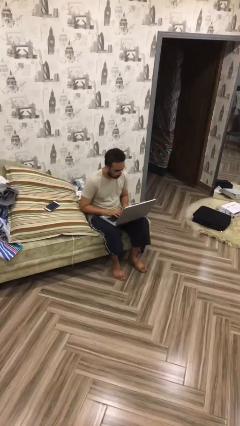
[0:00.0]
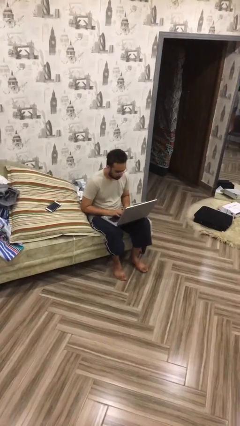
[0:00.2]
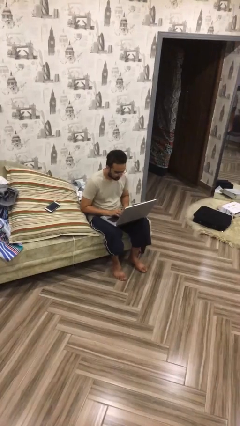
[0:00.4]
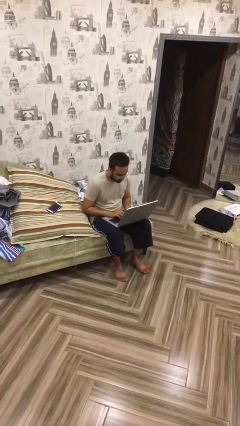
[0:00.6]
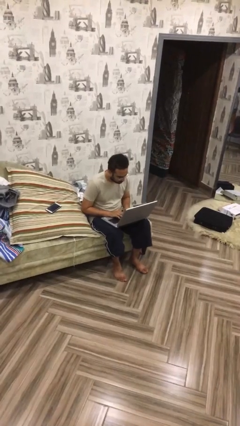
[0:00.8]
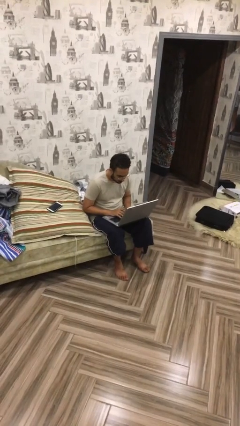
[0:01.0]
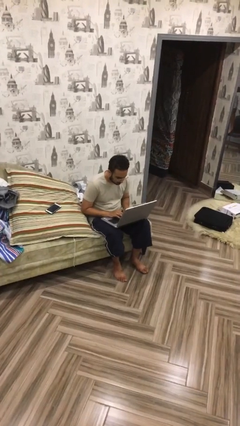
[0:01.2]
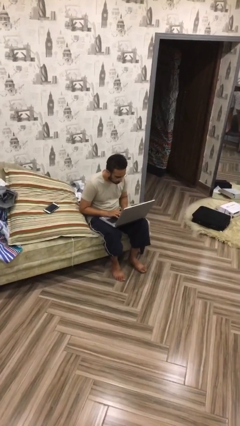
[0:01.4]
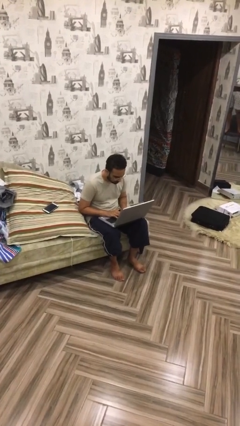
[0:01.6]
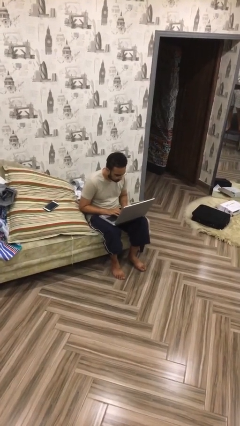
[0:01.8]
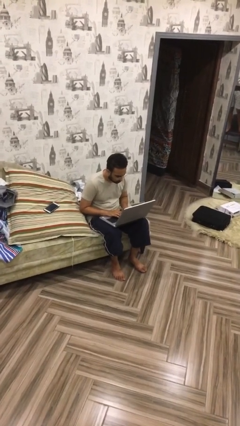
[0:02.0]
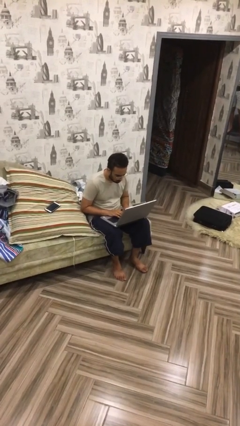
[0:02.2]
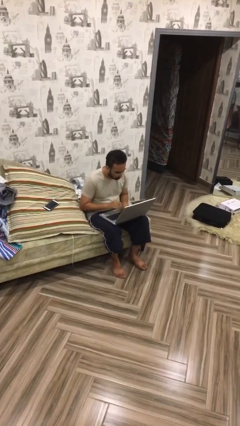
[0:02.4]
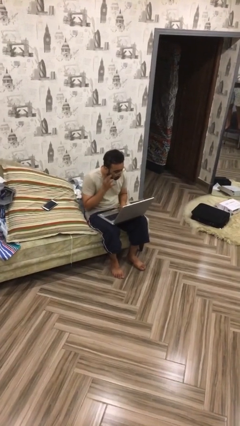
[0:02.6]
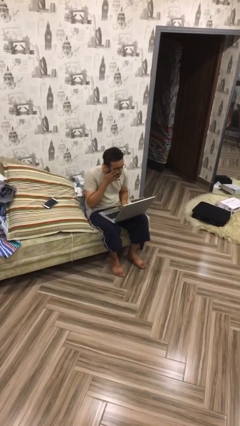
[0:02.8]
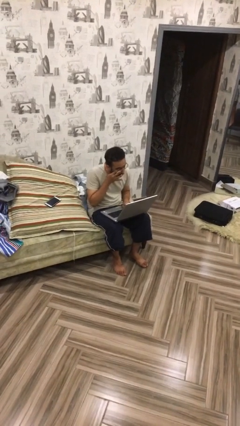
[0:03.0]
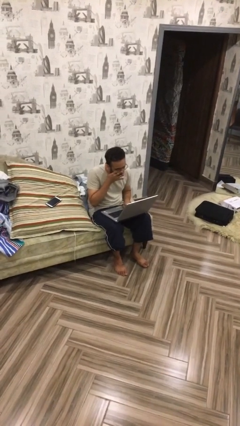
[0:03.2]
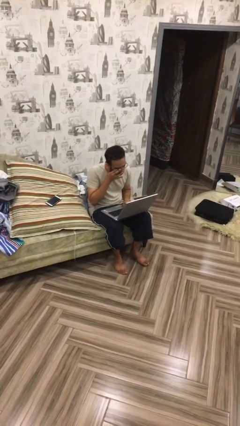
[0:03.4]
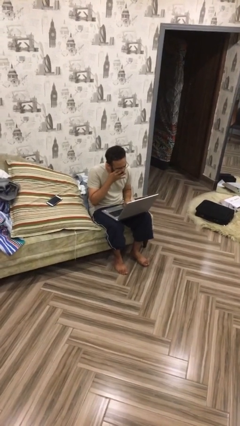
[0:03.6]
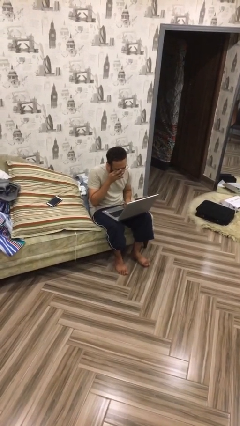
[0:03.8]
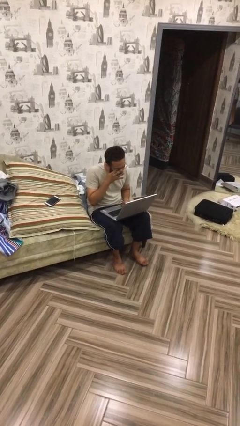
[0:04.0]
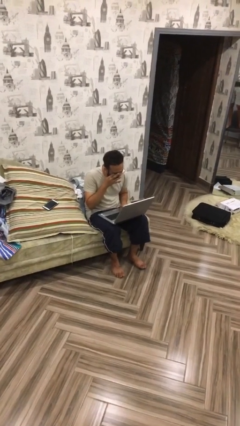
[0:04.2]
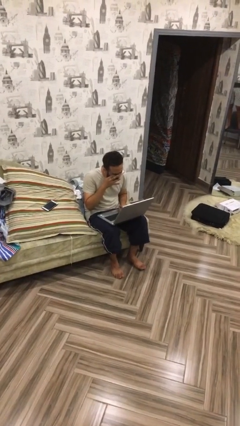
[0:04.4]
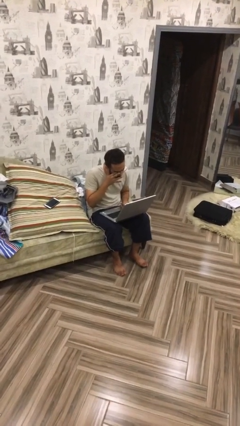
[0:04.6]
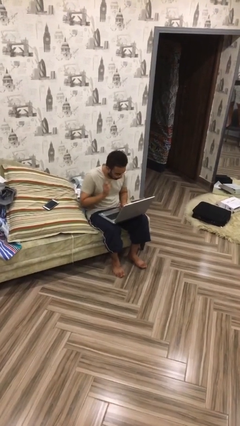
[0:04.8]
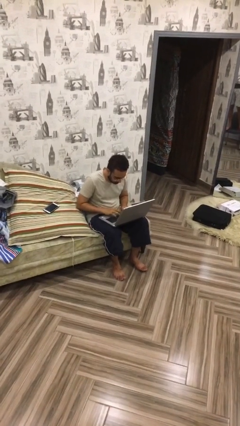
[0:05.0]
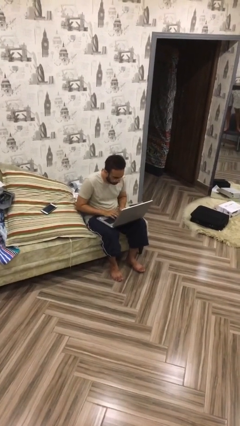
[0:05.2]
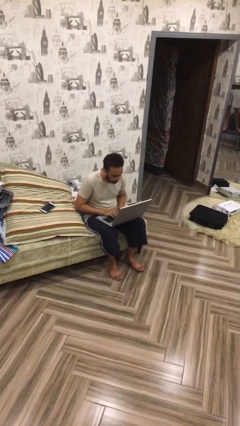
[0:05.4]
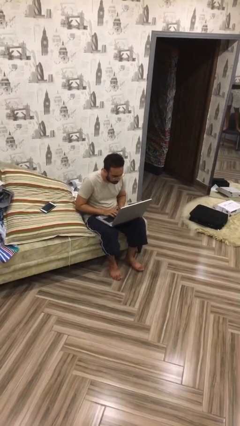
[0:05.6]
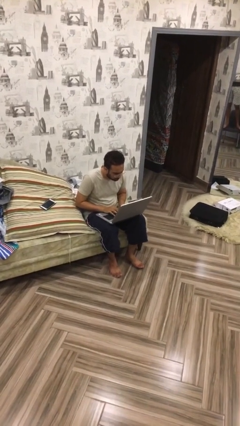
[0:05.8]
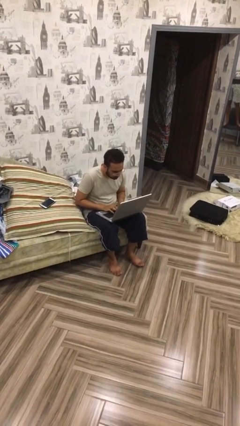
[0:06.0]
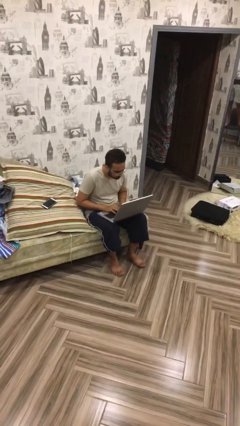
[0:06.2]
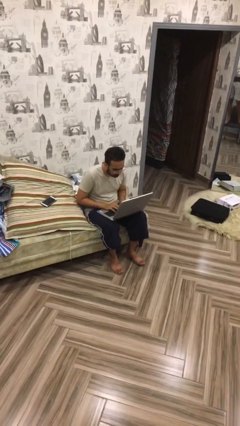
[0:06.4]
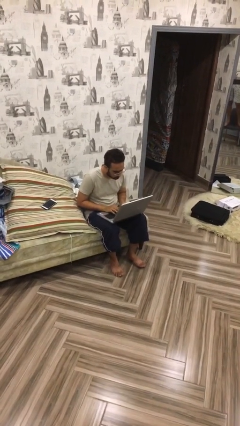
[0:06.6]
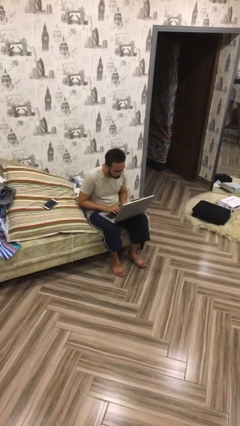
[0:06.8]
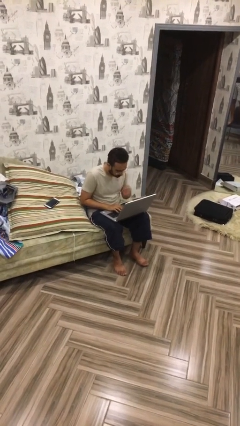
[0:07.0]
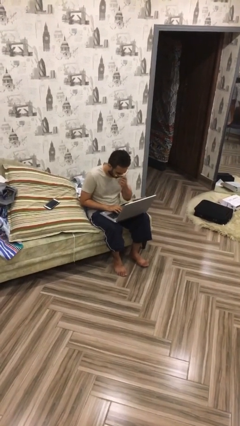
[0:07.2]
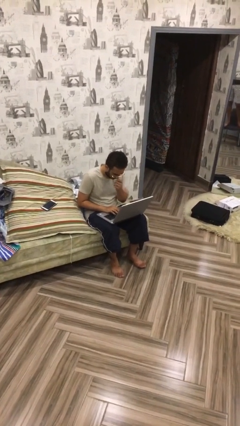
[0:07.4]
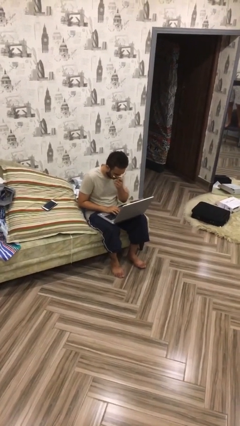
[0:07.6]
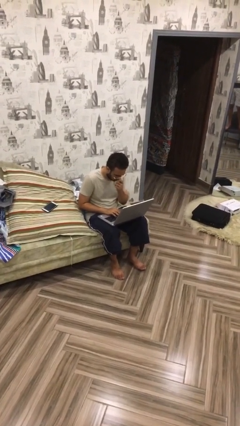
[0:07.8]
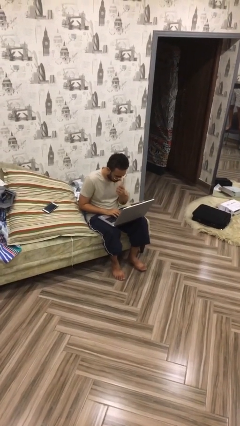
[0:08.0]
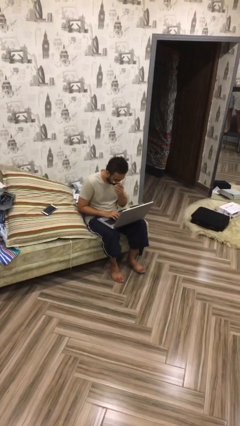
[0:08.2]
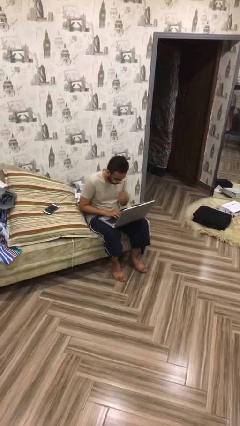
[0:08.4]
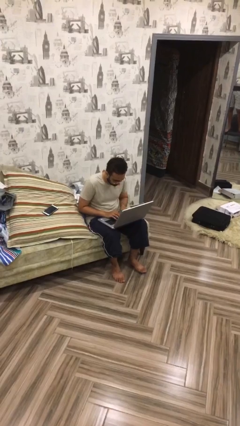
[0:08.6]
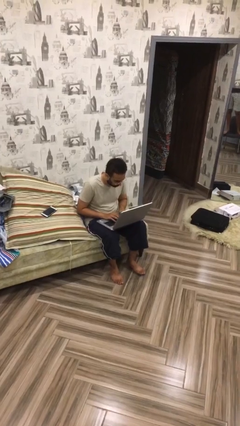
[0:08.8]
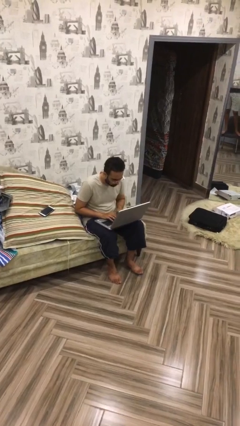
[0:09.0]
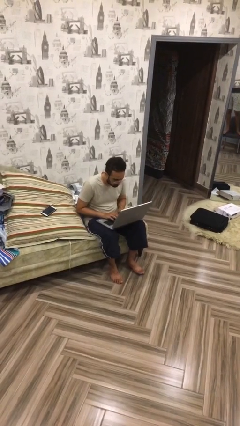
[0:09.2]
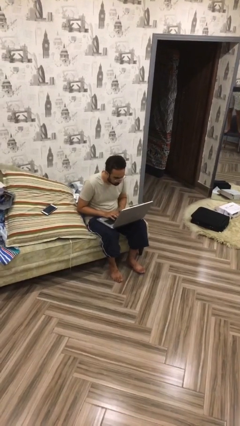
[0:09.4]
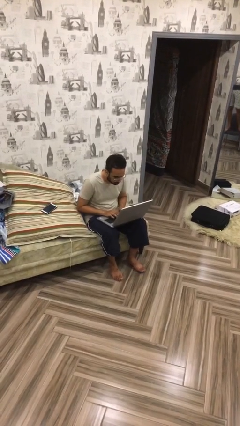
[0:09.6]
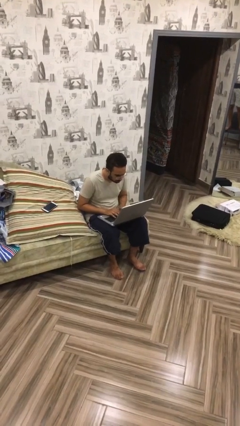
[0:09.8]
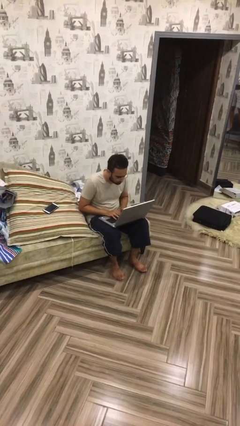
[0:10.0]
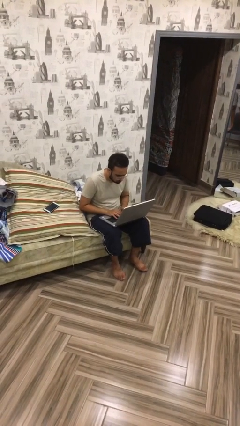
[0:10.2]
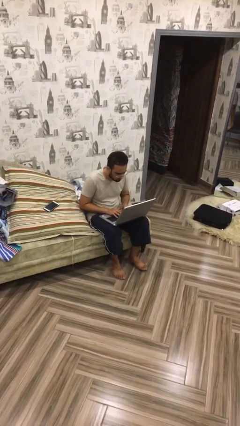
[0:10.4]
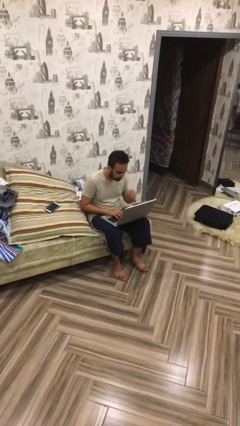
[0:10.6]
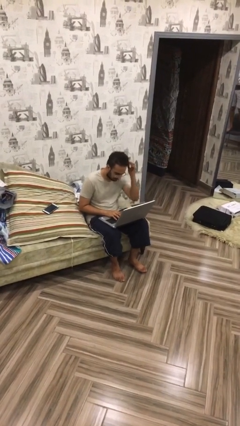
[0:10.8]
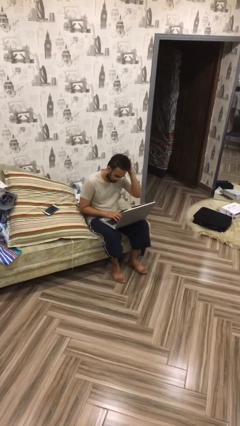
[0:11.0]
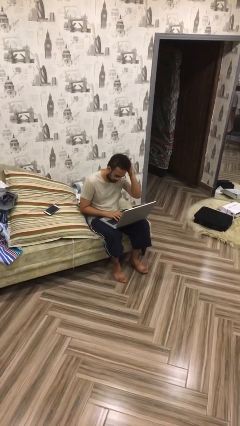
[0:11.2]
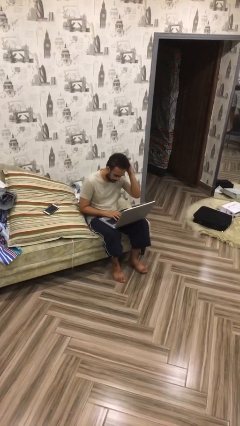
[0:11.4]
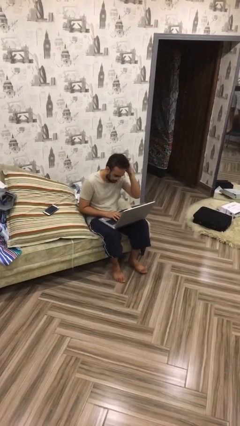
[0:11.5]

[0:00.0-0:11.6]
person interacts with laptop

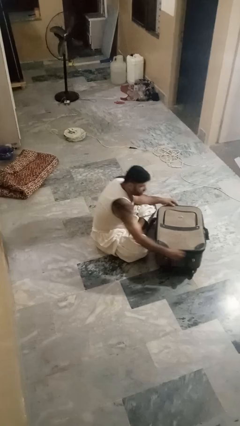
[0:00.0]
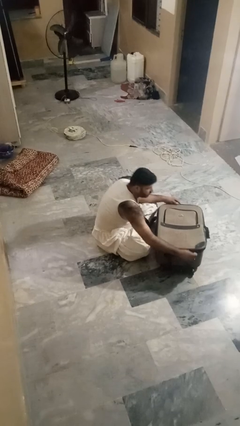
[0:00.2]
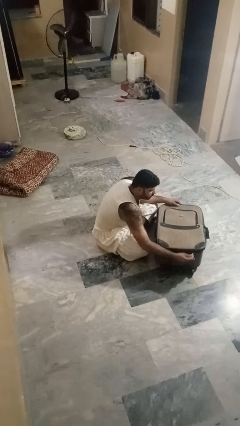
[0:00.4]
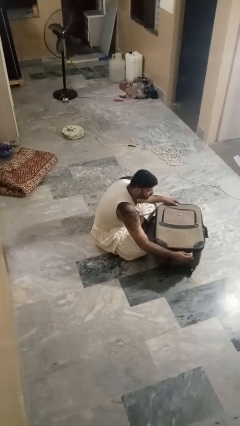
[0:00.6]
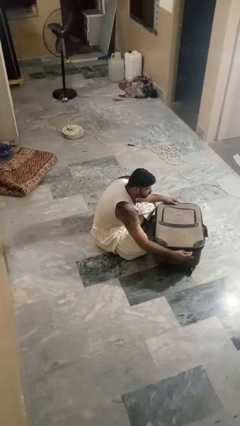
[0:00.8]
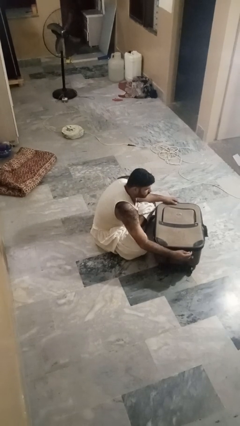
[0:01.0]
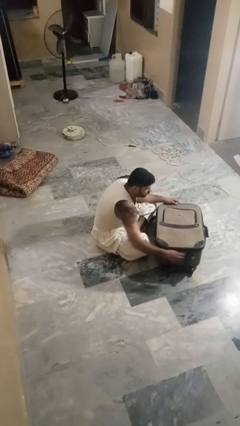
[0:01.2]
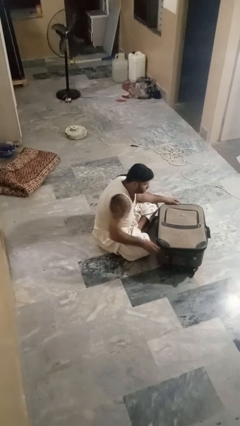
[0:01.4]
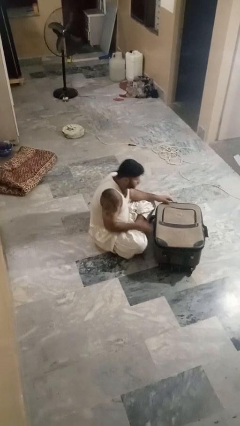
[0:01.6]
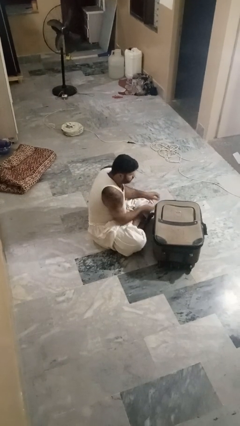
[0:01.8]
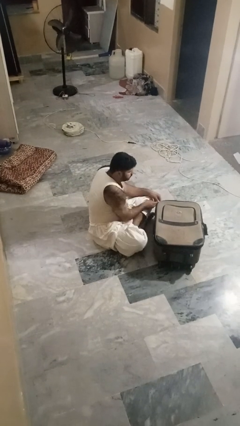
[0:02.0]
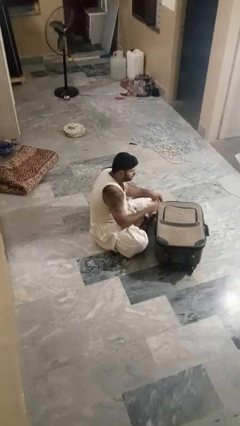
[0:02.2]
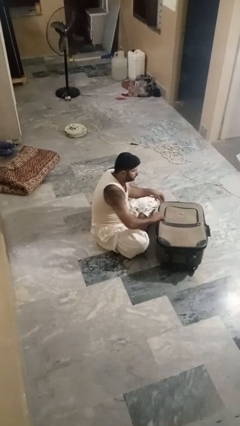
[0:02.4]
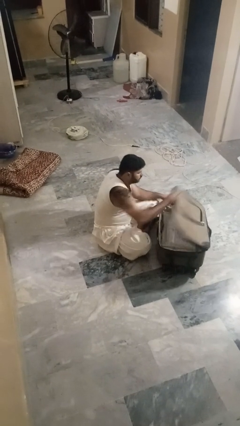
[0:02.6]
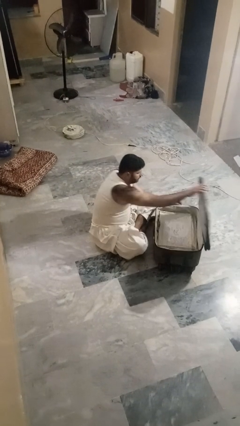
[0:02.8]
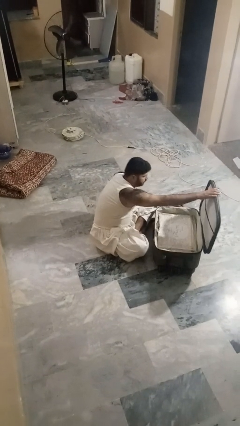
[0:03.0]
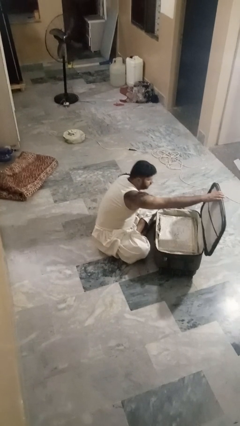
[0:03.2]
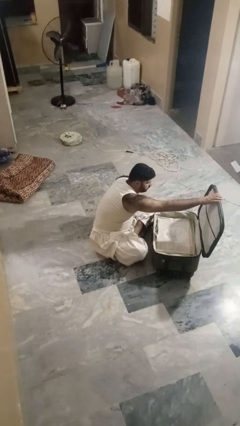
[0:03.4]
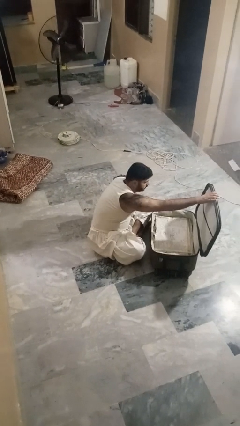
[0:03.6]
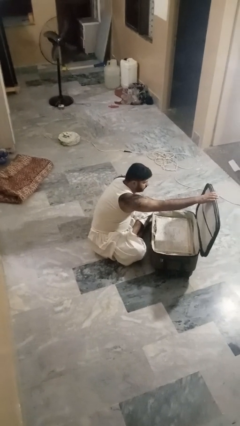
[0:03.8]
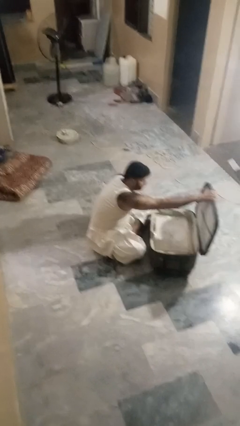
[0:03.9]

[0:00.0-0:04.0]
person opens suitcase

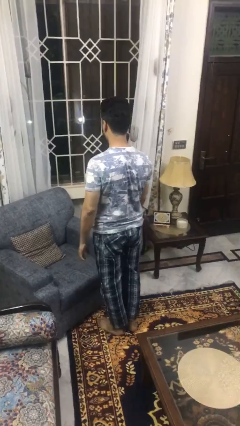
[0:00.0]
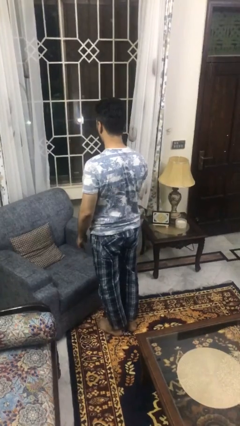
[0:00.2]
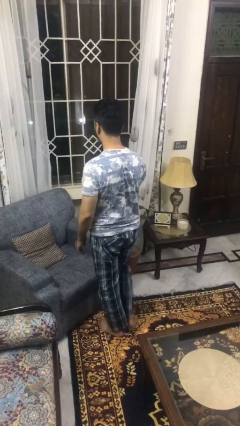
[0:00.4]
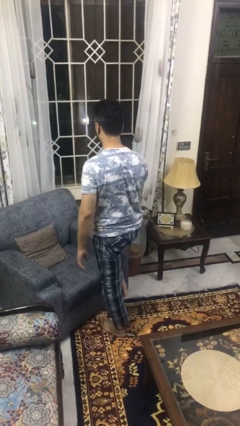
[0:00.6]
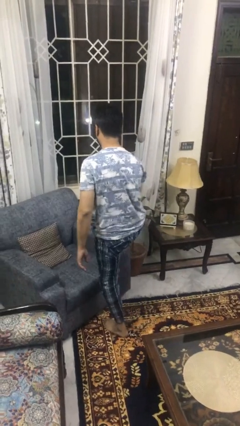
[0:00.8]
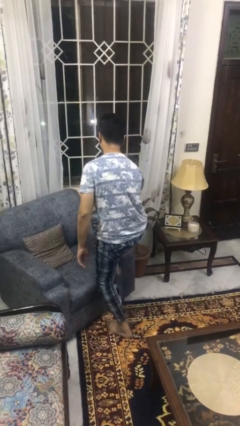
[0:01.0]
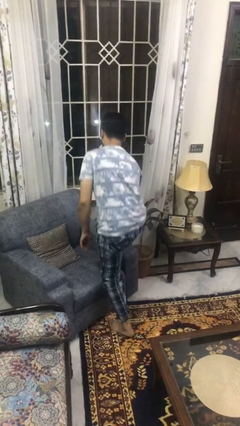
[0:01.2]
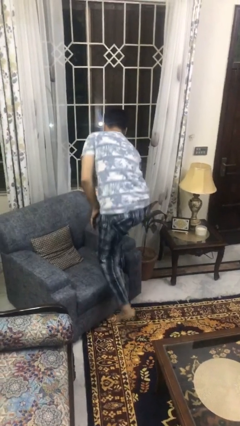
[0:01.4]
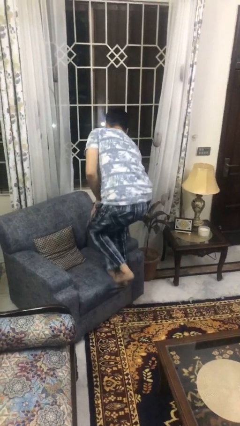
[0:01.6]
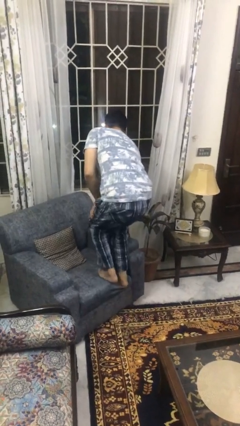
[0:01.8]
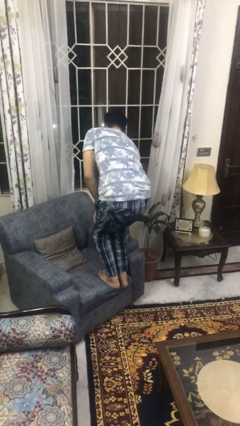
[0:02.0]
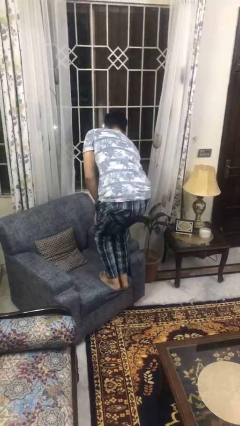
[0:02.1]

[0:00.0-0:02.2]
person climbs on couch

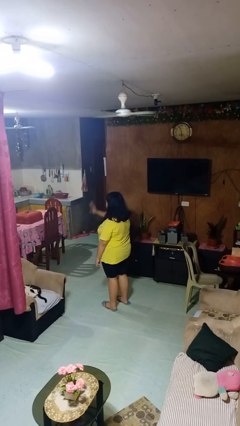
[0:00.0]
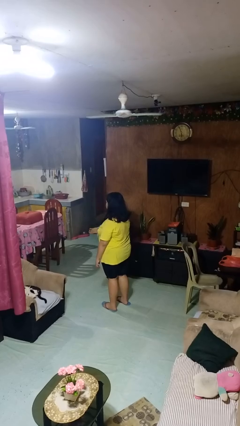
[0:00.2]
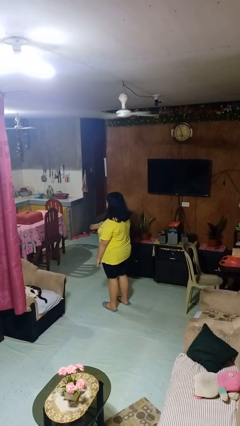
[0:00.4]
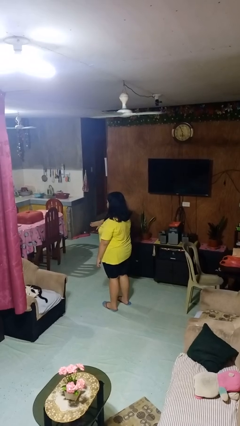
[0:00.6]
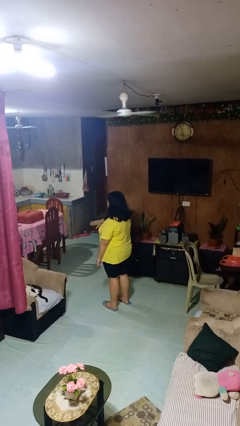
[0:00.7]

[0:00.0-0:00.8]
person gestures swipe down
